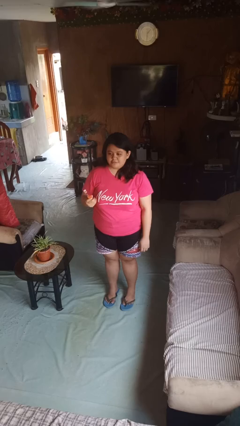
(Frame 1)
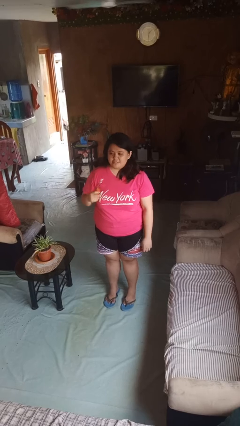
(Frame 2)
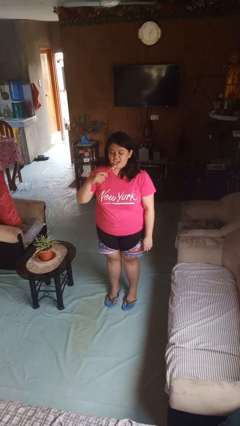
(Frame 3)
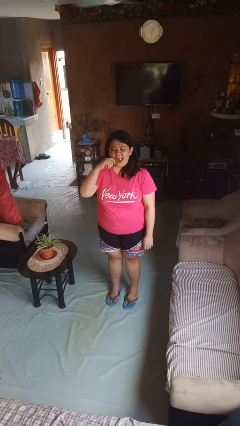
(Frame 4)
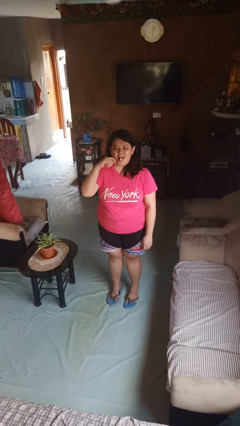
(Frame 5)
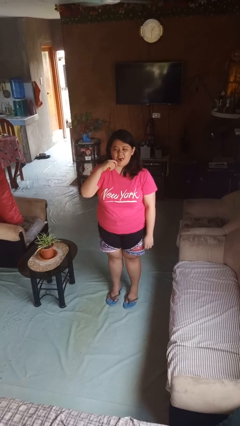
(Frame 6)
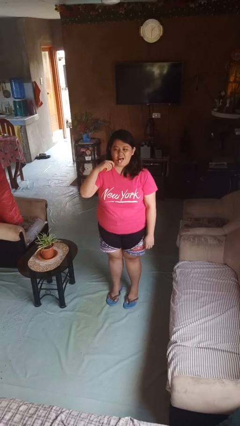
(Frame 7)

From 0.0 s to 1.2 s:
person brushes teeth

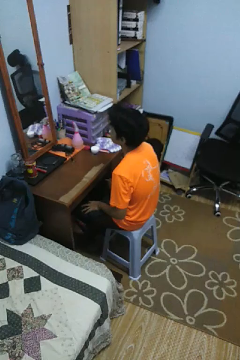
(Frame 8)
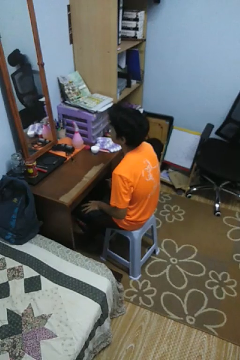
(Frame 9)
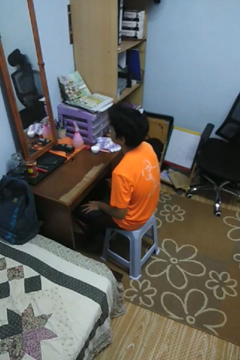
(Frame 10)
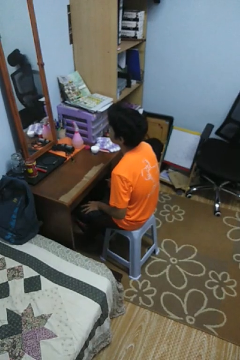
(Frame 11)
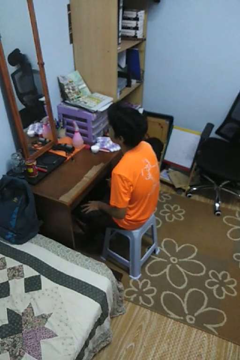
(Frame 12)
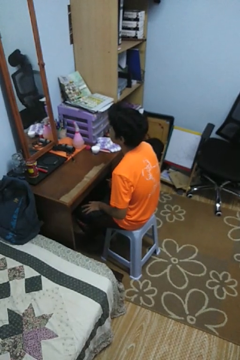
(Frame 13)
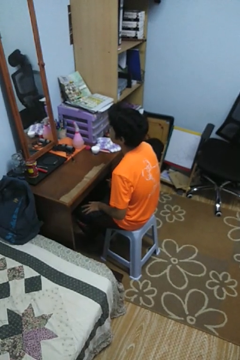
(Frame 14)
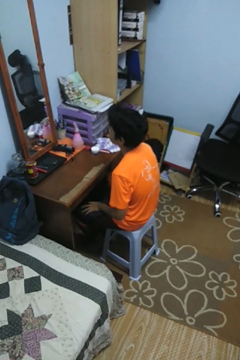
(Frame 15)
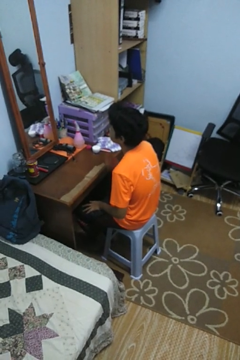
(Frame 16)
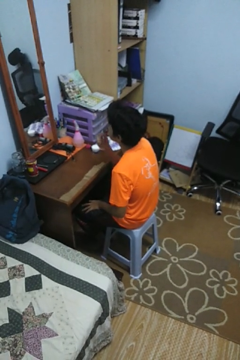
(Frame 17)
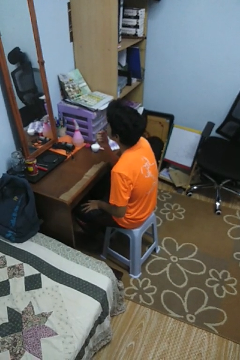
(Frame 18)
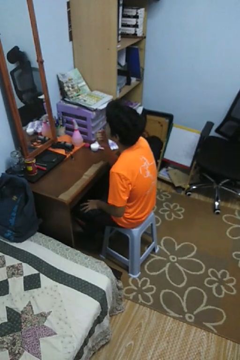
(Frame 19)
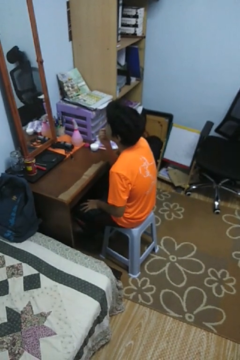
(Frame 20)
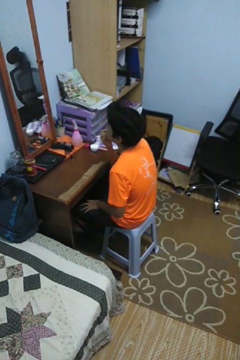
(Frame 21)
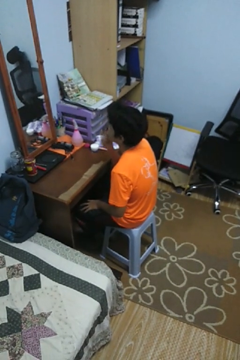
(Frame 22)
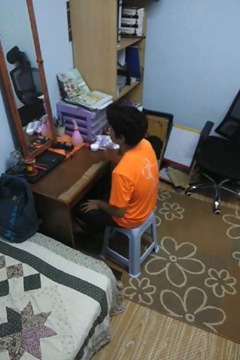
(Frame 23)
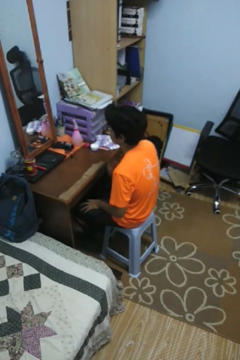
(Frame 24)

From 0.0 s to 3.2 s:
person applies lip makeup

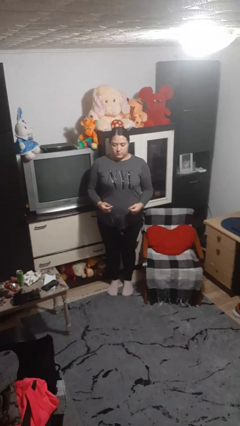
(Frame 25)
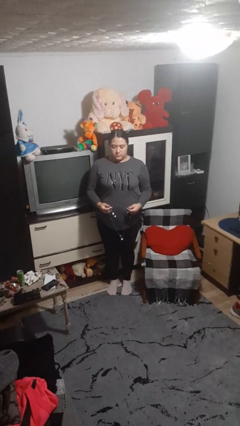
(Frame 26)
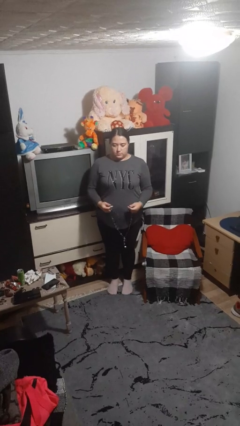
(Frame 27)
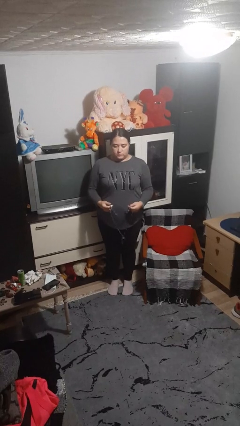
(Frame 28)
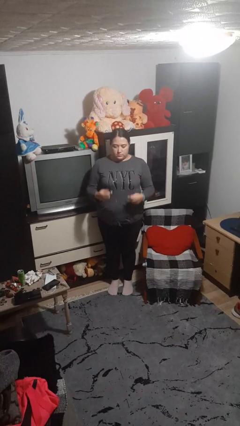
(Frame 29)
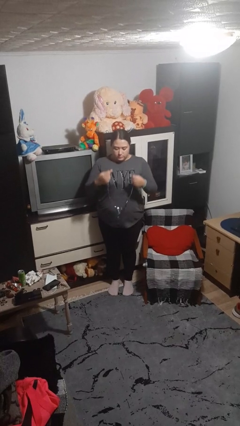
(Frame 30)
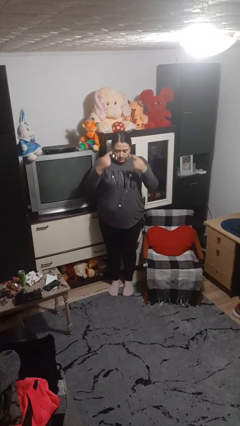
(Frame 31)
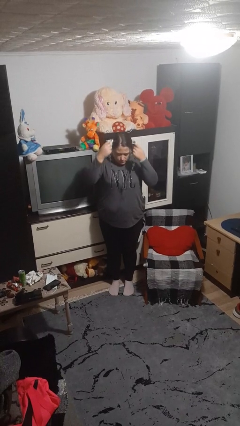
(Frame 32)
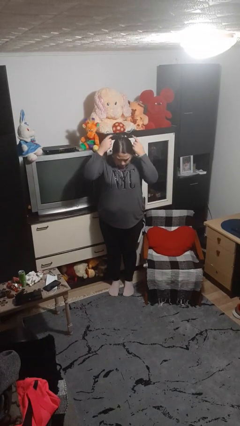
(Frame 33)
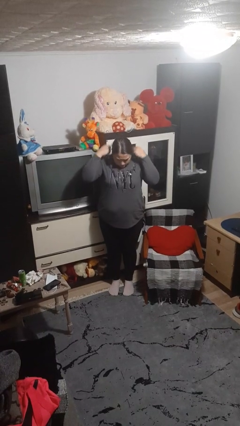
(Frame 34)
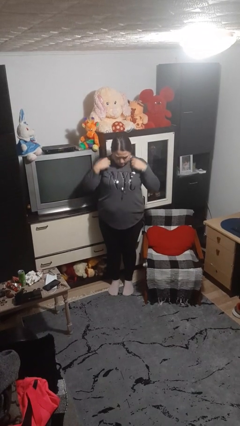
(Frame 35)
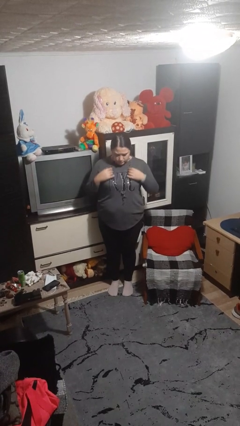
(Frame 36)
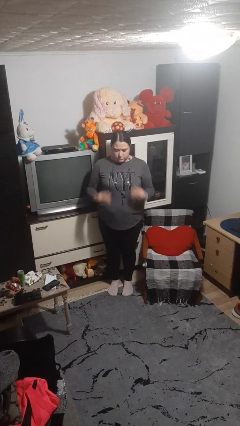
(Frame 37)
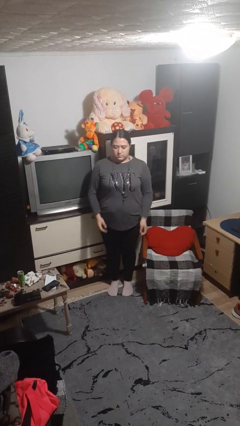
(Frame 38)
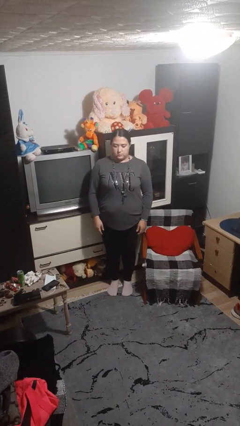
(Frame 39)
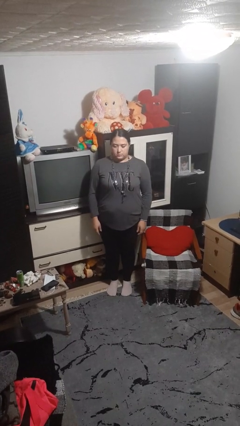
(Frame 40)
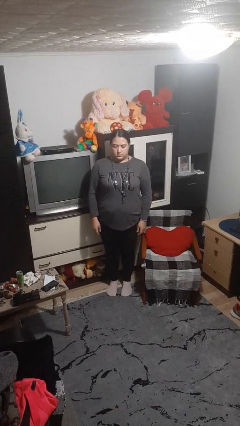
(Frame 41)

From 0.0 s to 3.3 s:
person puts on necklace

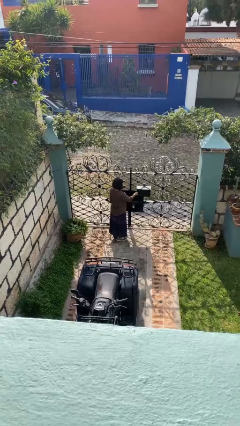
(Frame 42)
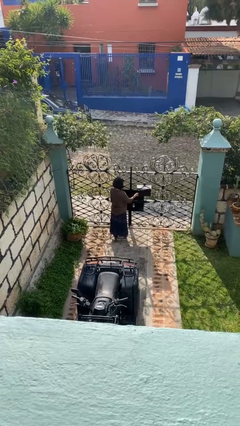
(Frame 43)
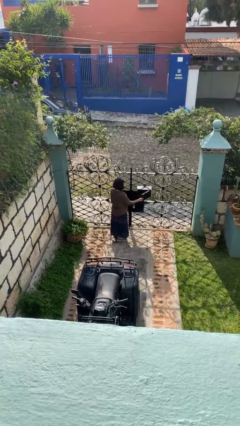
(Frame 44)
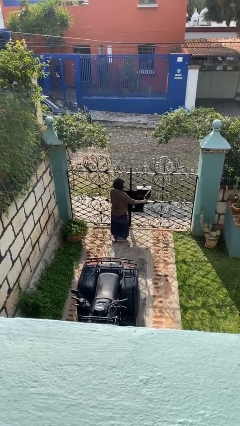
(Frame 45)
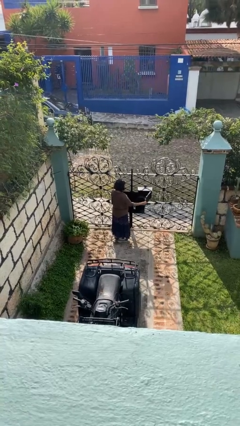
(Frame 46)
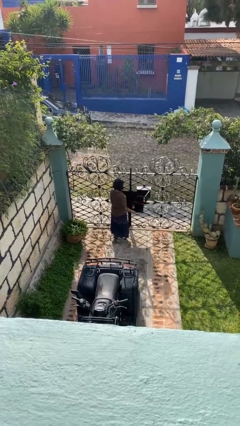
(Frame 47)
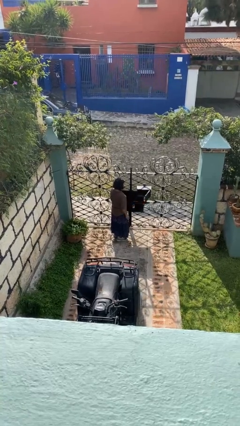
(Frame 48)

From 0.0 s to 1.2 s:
person opens mailbox

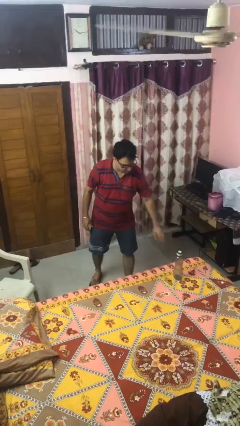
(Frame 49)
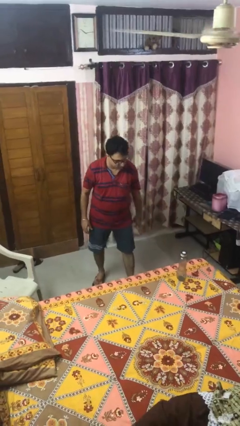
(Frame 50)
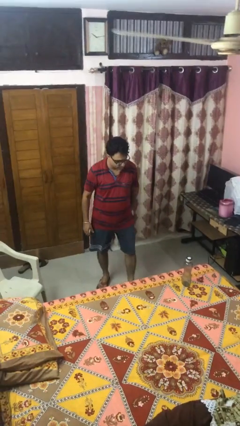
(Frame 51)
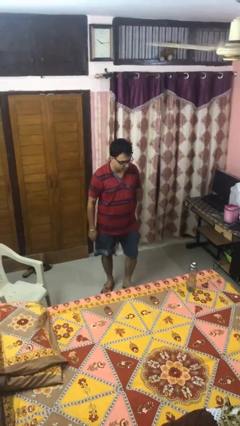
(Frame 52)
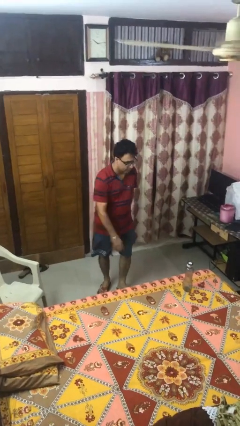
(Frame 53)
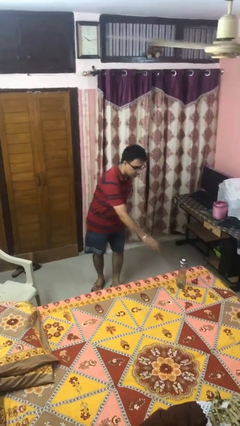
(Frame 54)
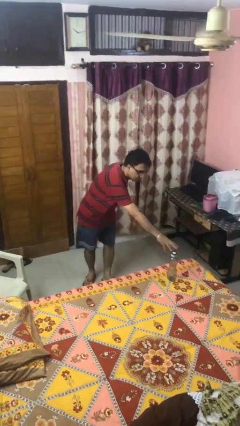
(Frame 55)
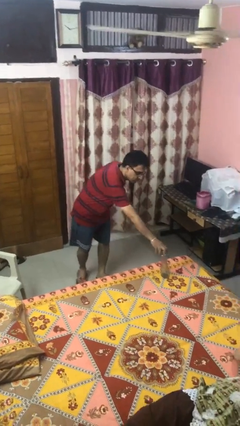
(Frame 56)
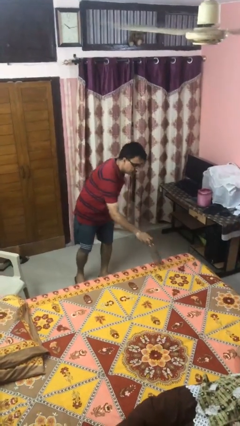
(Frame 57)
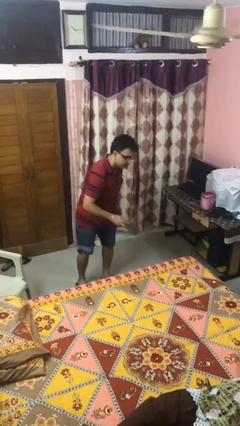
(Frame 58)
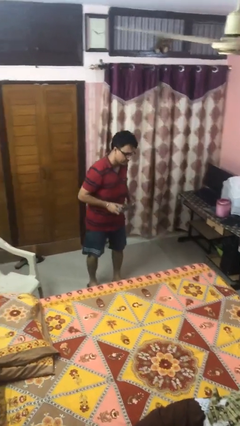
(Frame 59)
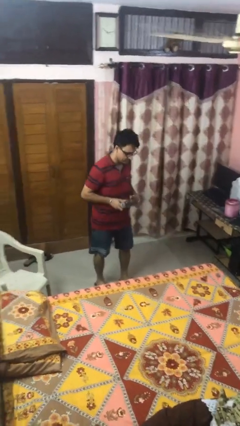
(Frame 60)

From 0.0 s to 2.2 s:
person picks up object from bed

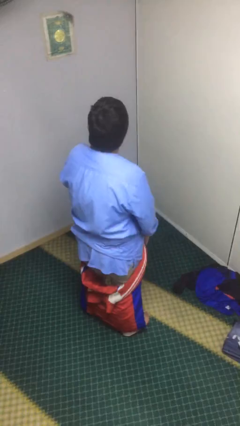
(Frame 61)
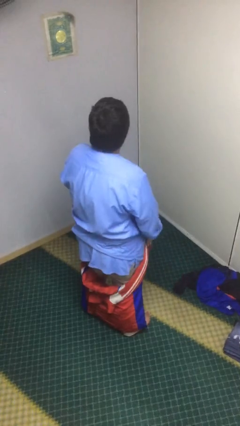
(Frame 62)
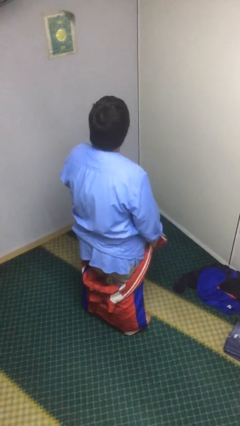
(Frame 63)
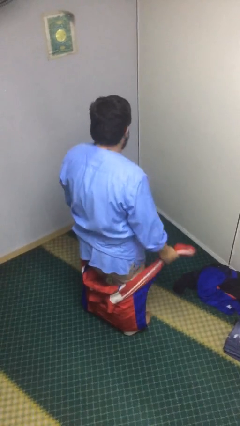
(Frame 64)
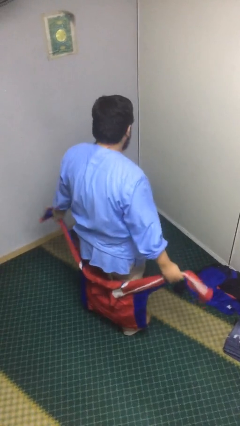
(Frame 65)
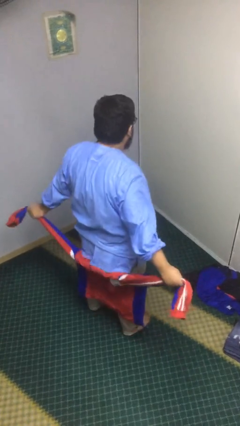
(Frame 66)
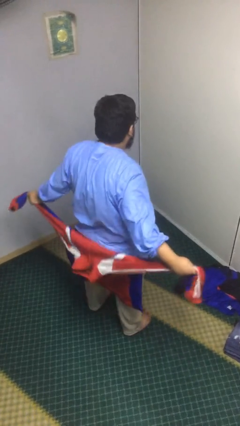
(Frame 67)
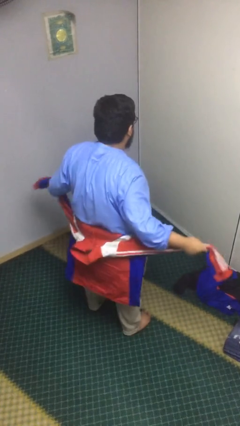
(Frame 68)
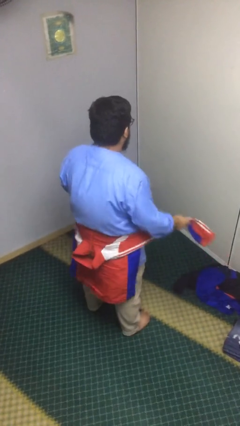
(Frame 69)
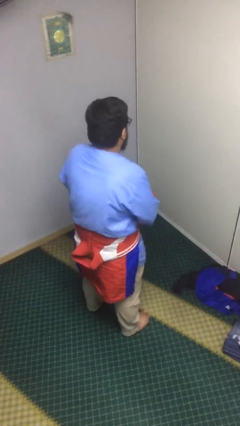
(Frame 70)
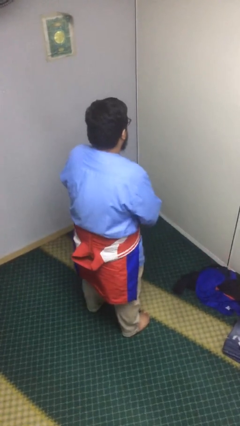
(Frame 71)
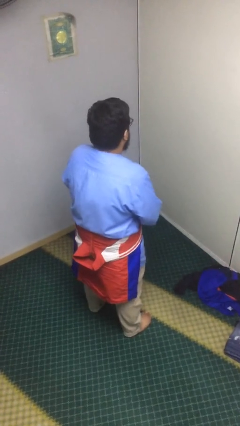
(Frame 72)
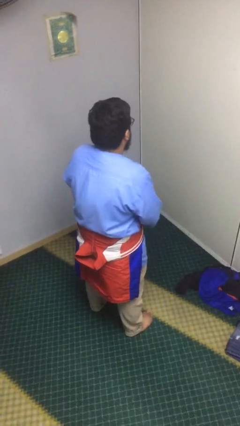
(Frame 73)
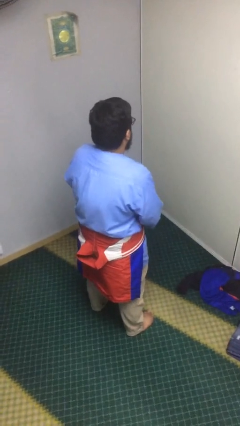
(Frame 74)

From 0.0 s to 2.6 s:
person ties jacket around waist

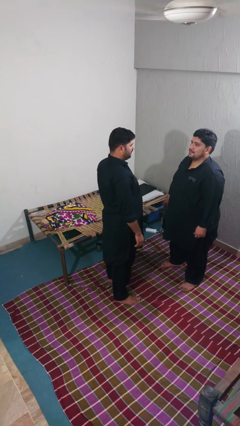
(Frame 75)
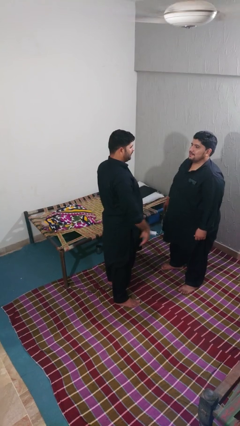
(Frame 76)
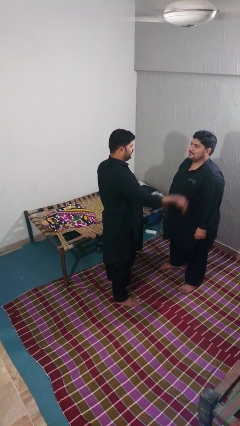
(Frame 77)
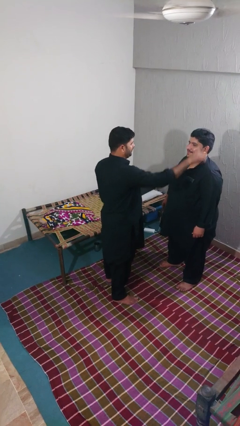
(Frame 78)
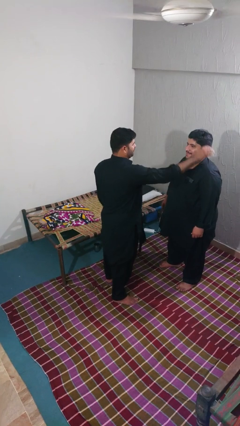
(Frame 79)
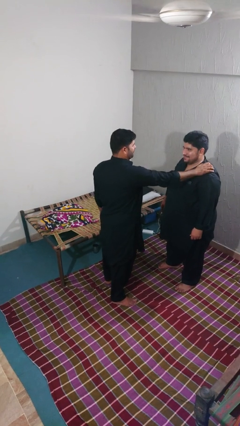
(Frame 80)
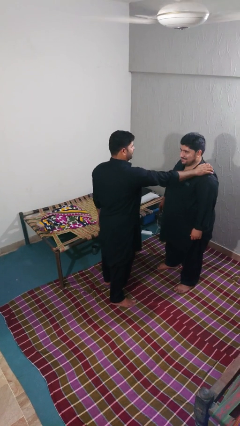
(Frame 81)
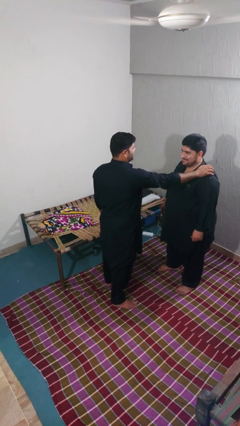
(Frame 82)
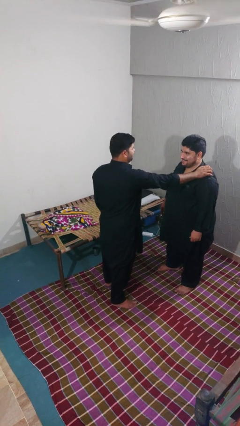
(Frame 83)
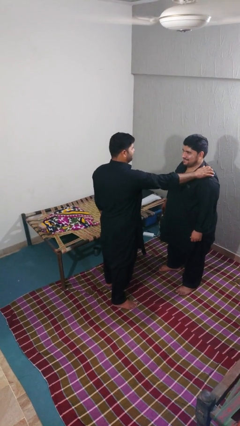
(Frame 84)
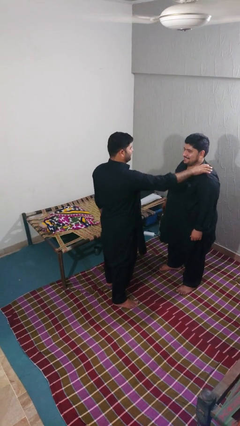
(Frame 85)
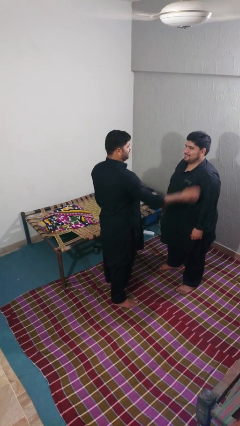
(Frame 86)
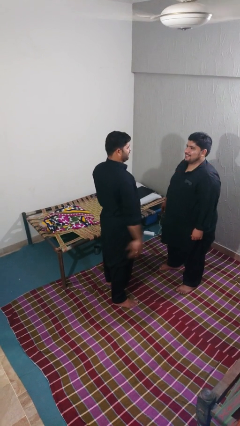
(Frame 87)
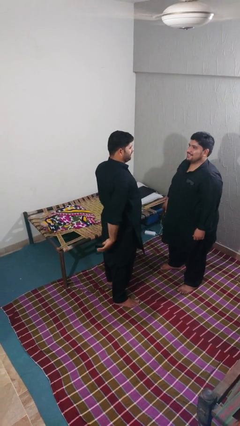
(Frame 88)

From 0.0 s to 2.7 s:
person pounds shoulders of person

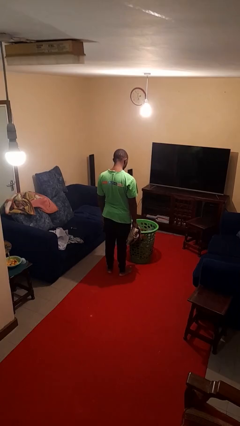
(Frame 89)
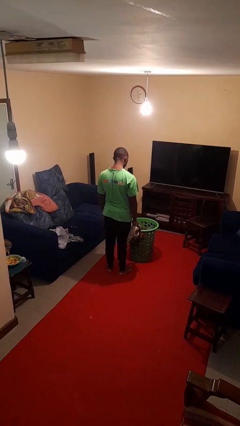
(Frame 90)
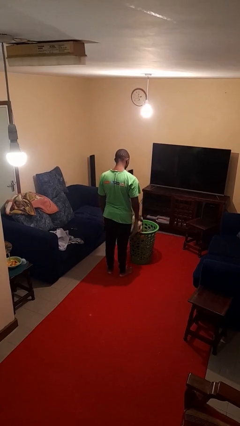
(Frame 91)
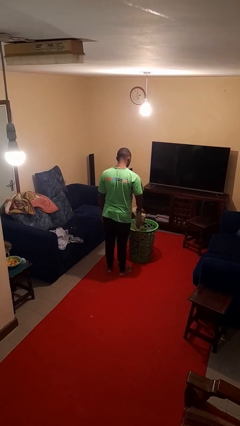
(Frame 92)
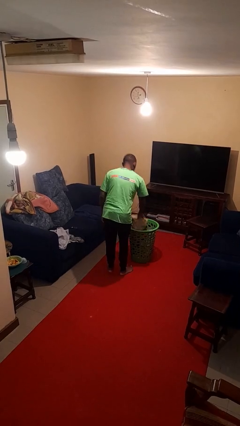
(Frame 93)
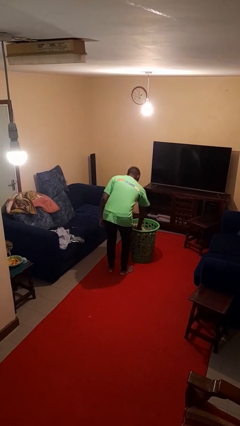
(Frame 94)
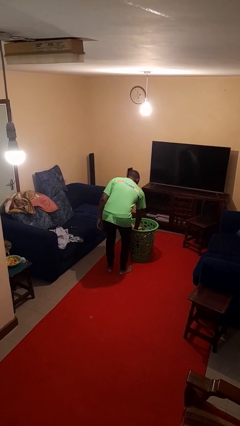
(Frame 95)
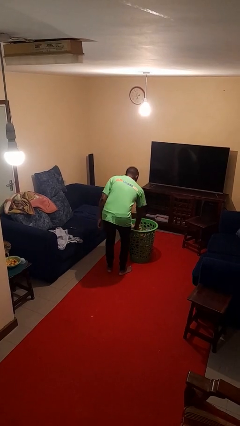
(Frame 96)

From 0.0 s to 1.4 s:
person puts object into basket
